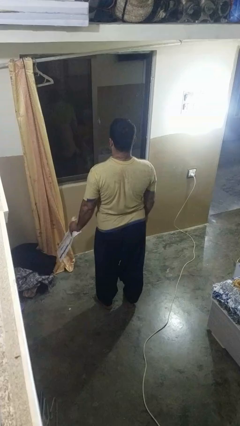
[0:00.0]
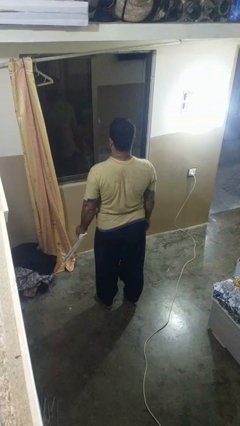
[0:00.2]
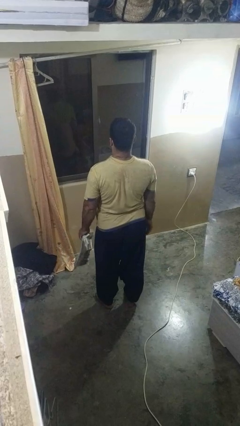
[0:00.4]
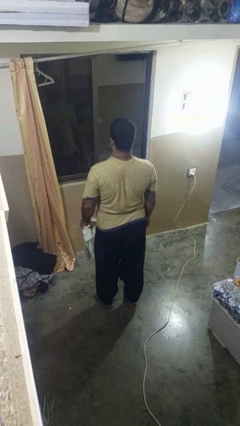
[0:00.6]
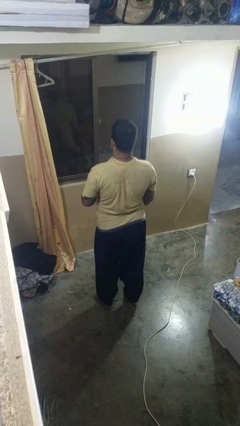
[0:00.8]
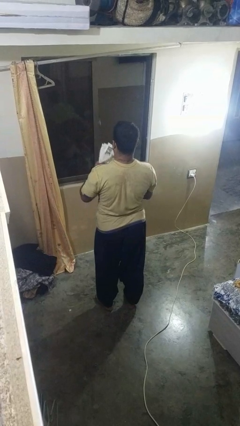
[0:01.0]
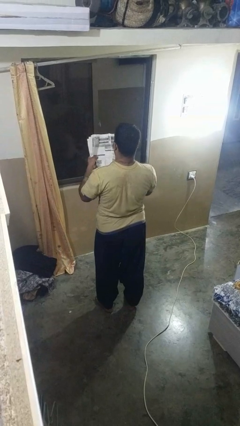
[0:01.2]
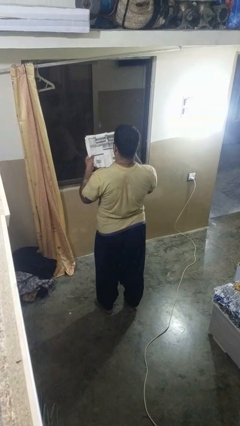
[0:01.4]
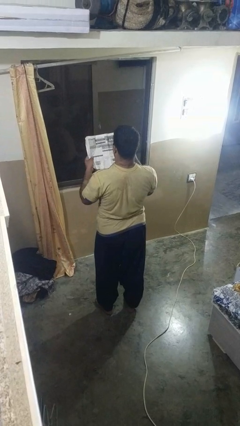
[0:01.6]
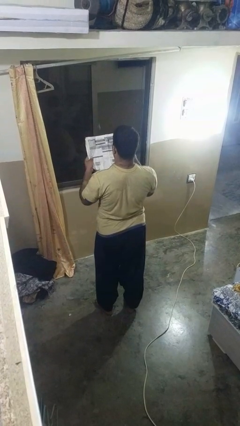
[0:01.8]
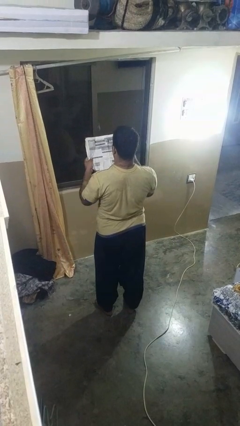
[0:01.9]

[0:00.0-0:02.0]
person reads newspaper

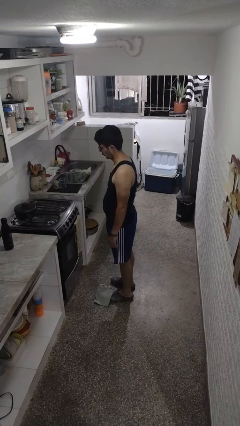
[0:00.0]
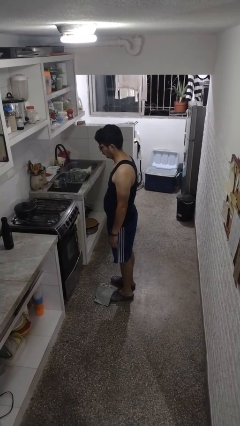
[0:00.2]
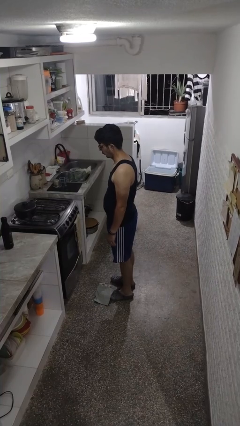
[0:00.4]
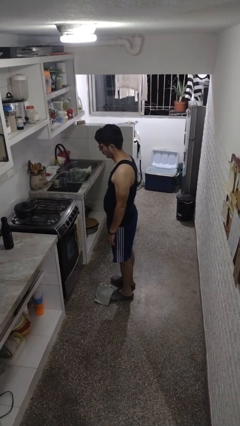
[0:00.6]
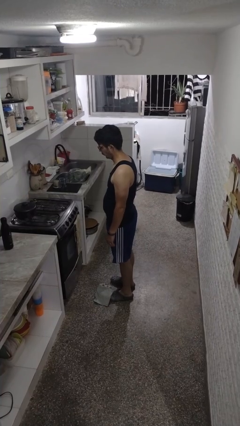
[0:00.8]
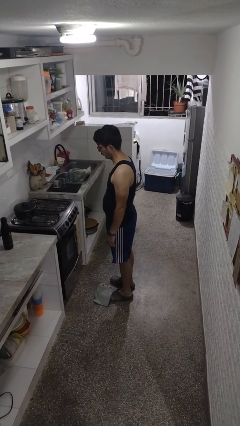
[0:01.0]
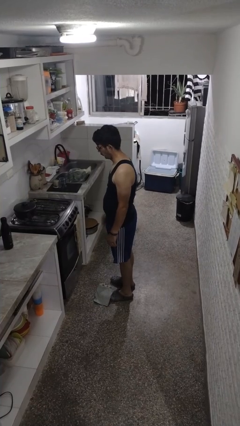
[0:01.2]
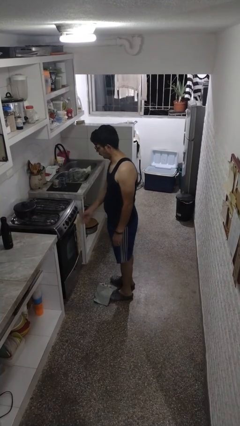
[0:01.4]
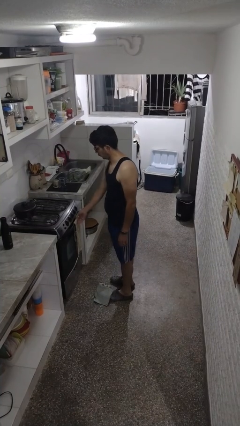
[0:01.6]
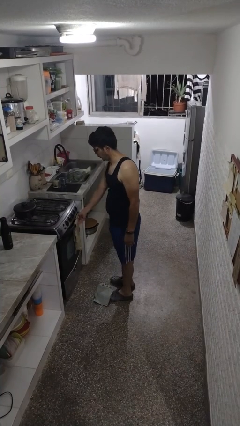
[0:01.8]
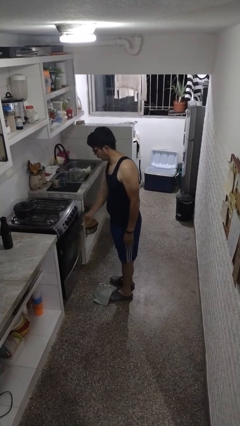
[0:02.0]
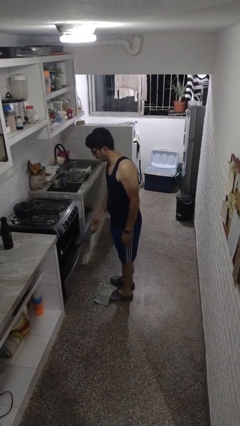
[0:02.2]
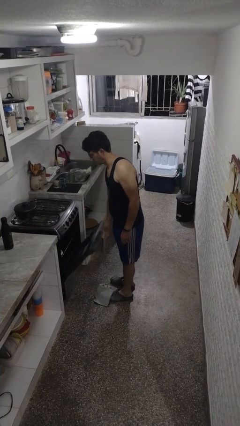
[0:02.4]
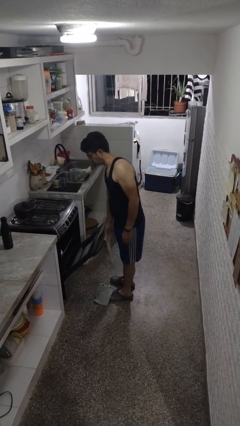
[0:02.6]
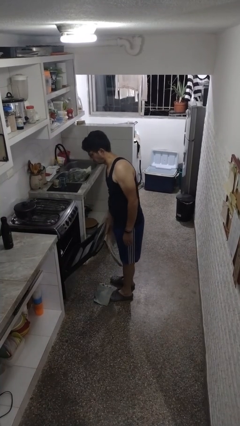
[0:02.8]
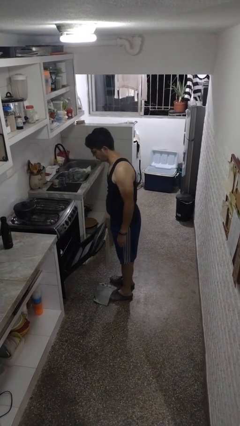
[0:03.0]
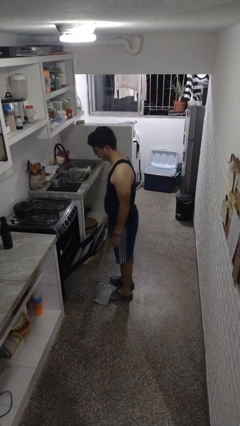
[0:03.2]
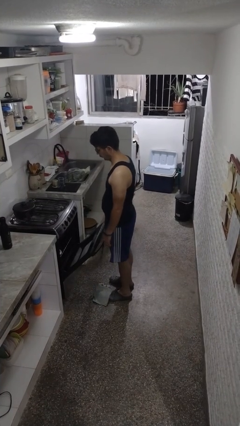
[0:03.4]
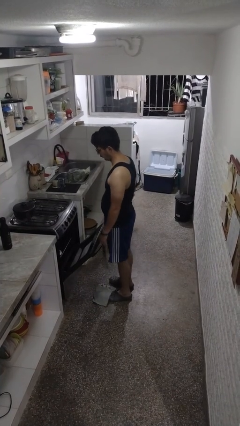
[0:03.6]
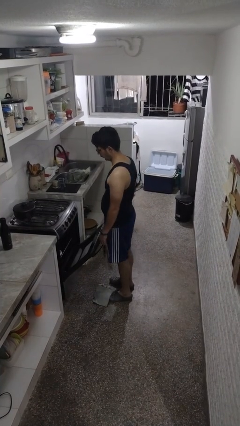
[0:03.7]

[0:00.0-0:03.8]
person opens oven door

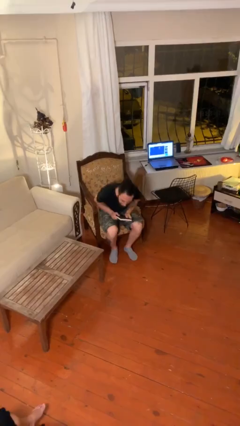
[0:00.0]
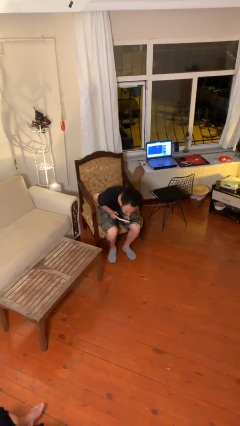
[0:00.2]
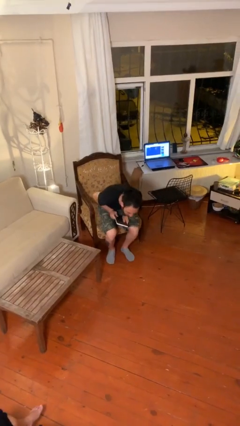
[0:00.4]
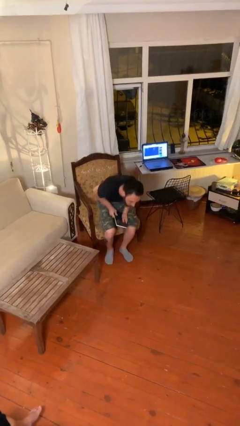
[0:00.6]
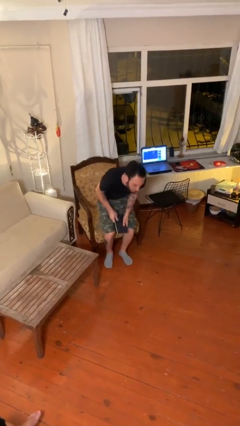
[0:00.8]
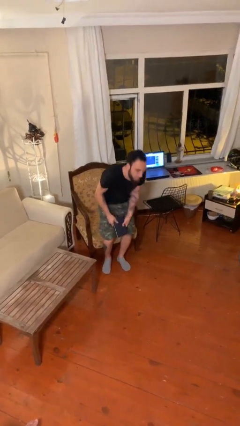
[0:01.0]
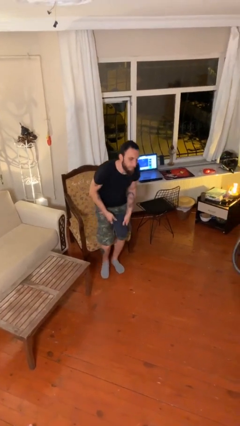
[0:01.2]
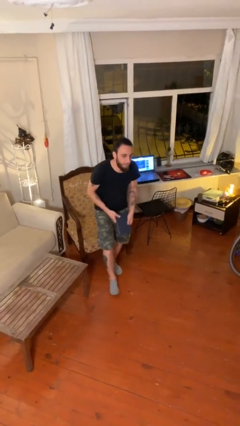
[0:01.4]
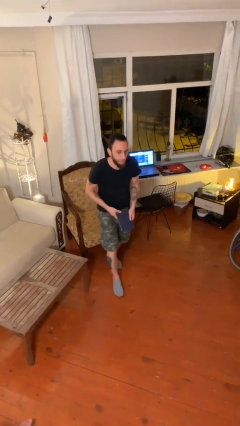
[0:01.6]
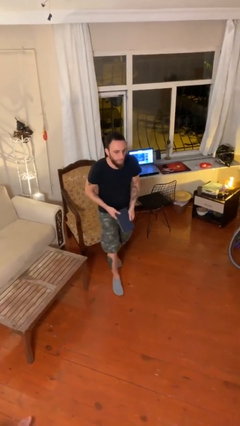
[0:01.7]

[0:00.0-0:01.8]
person stands up

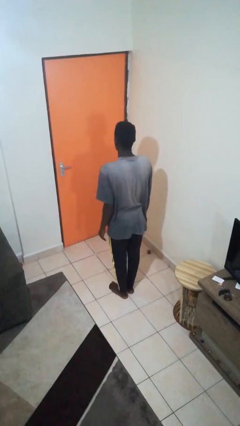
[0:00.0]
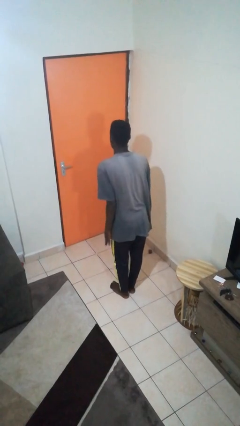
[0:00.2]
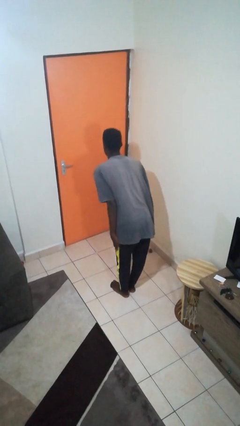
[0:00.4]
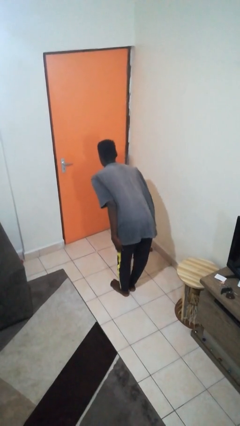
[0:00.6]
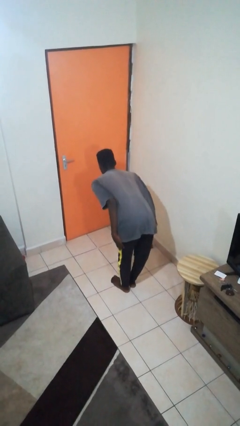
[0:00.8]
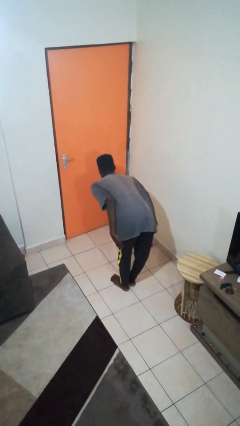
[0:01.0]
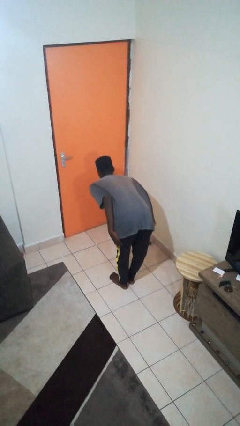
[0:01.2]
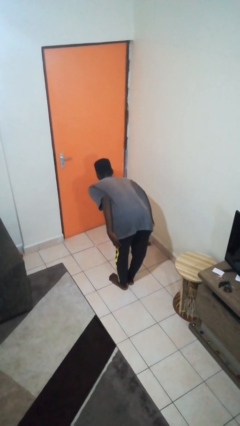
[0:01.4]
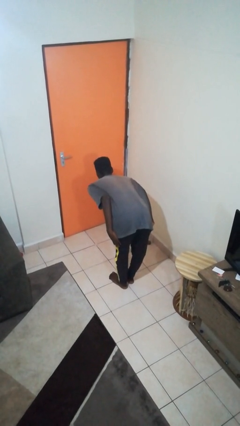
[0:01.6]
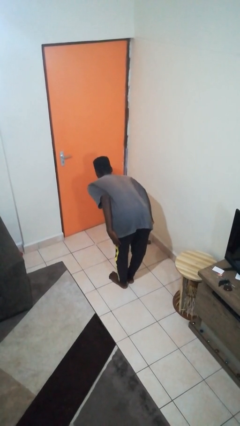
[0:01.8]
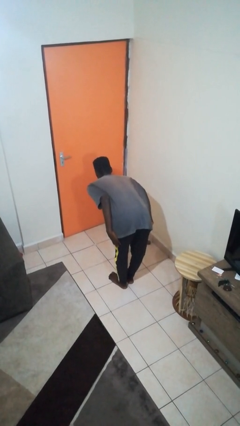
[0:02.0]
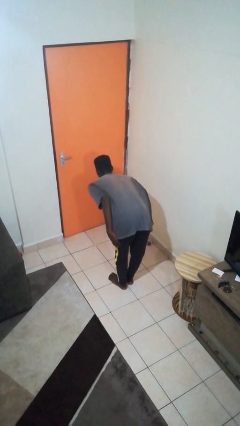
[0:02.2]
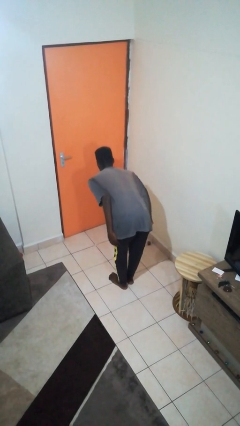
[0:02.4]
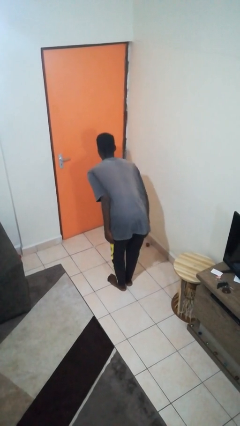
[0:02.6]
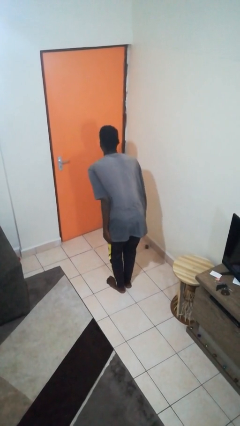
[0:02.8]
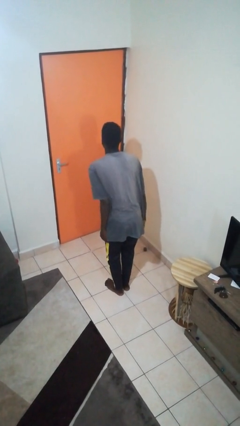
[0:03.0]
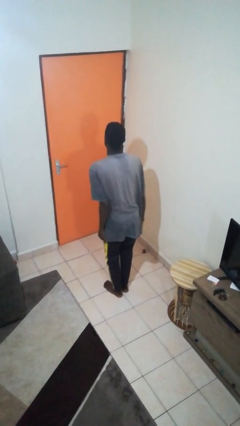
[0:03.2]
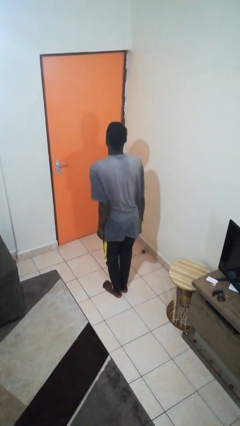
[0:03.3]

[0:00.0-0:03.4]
person bows

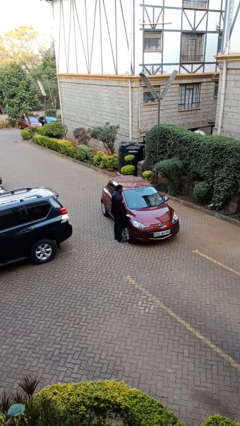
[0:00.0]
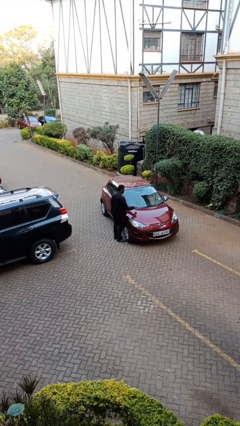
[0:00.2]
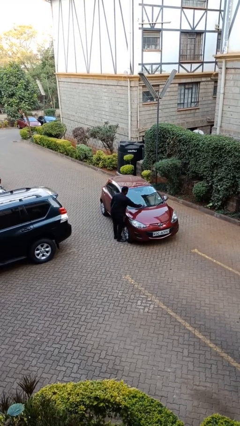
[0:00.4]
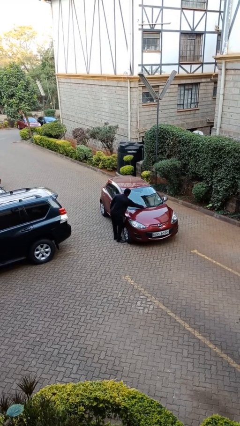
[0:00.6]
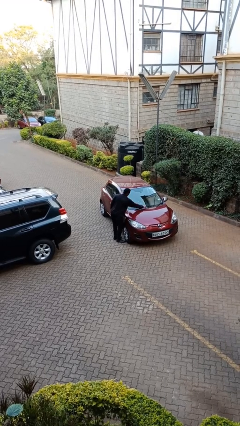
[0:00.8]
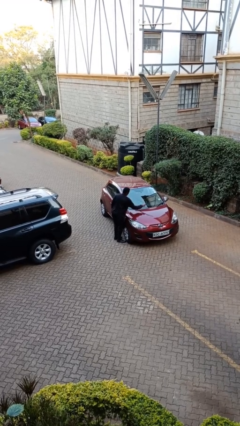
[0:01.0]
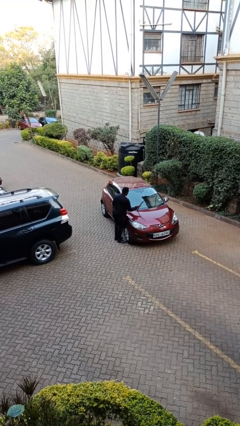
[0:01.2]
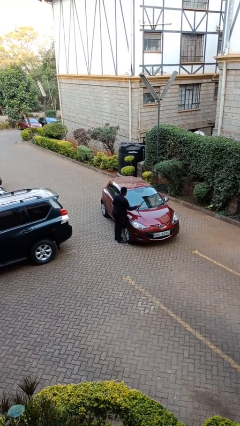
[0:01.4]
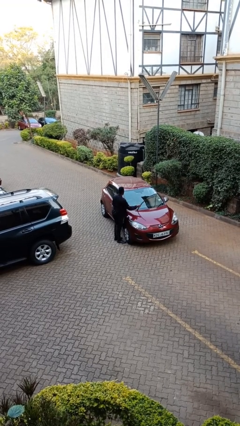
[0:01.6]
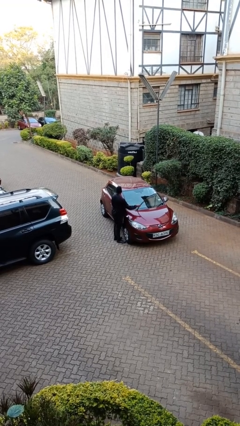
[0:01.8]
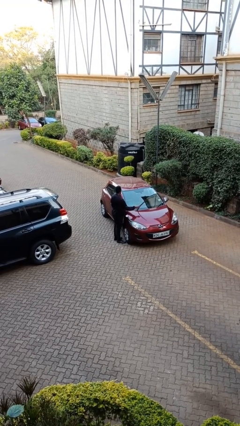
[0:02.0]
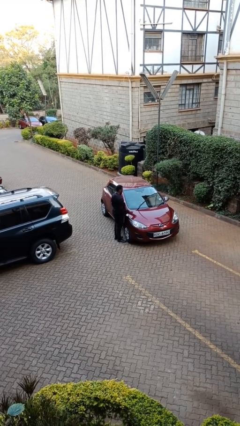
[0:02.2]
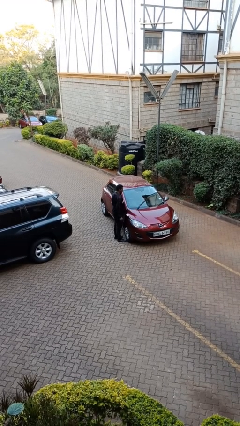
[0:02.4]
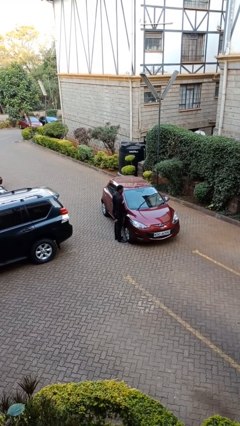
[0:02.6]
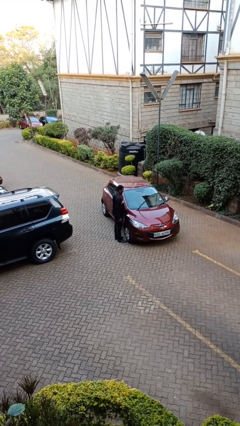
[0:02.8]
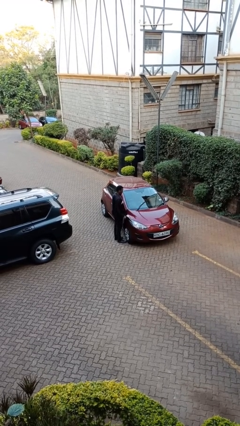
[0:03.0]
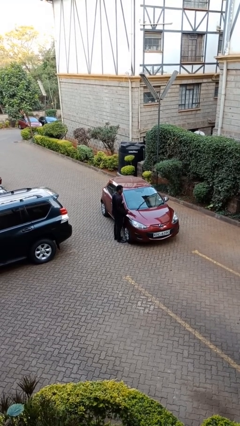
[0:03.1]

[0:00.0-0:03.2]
person flips up car wipers

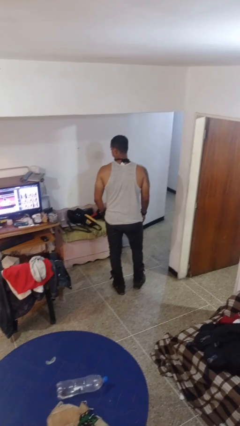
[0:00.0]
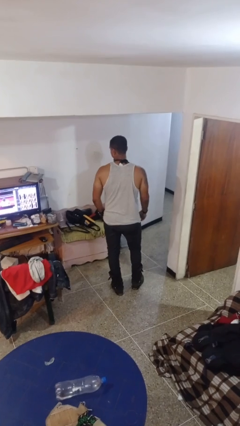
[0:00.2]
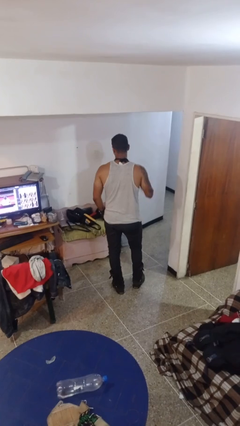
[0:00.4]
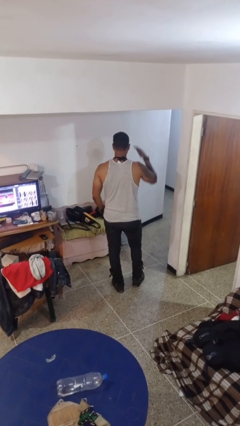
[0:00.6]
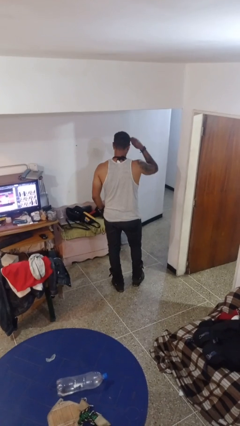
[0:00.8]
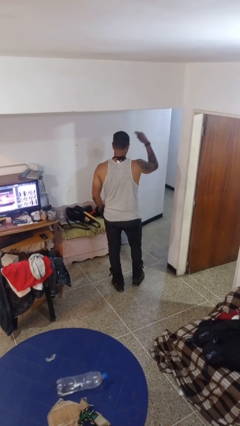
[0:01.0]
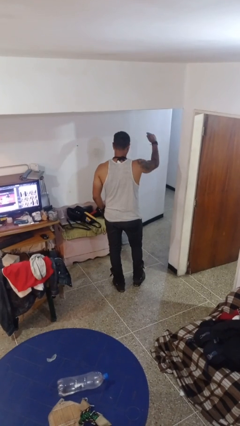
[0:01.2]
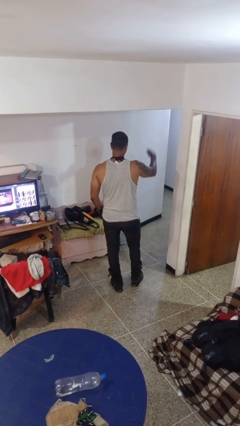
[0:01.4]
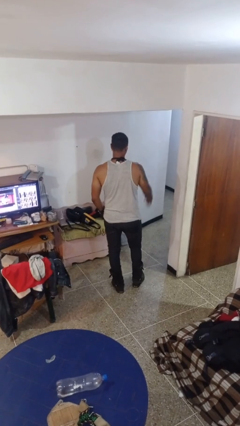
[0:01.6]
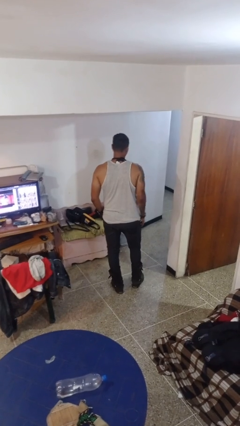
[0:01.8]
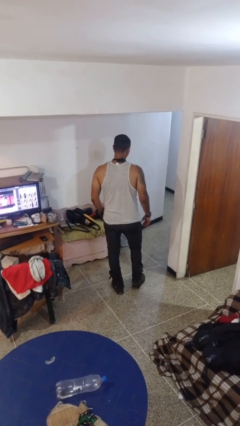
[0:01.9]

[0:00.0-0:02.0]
person salutes

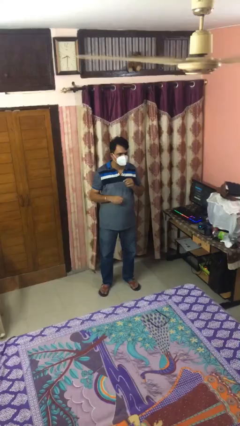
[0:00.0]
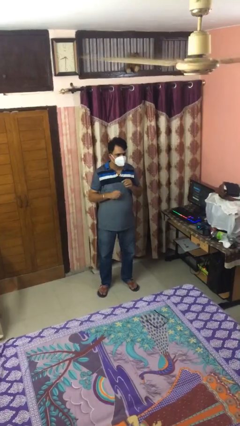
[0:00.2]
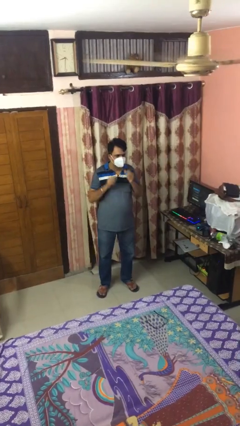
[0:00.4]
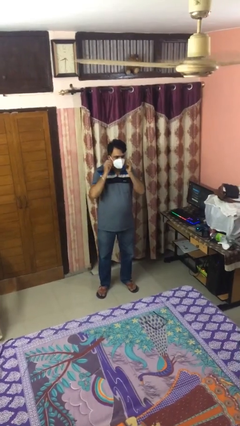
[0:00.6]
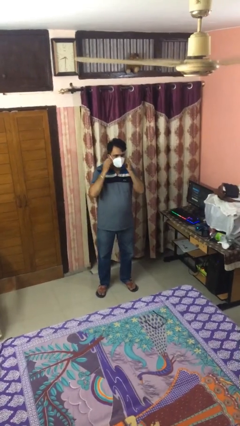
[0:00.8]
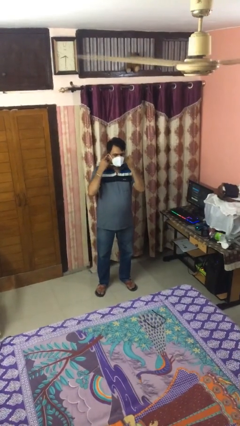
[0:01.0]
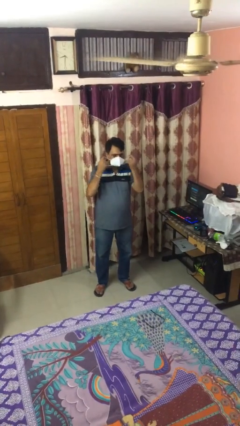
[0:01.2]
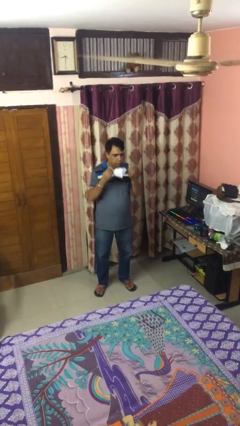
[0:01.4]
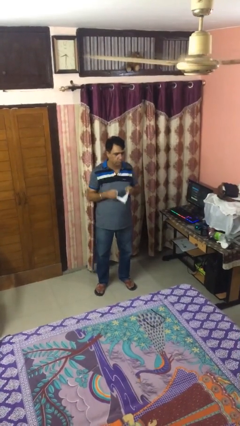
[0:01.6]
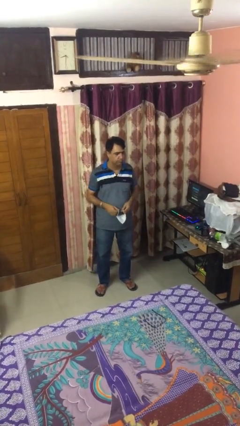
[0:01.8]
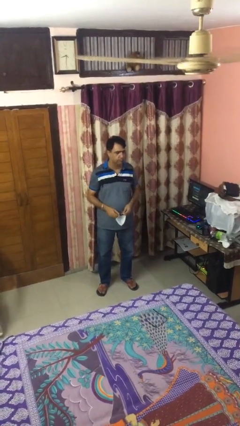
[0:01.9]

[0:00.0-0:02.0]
person takes off facemask
